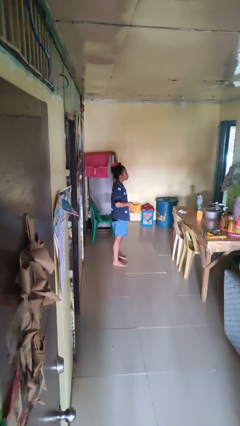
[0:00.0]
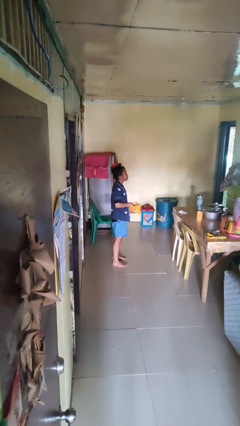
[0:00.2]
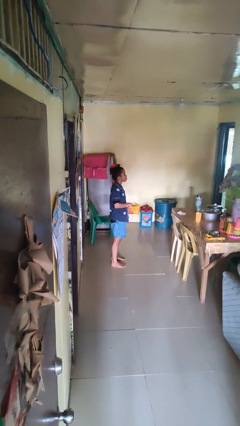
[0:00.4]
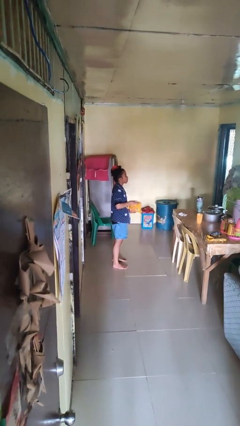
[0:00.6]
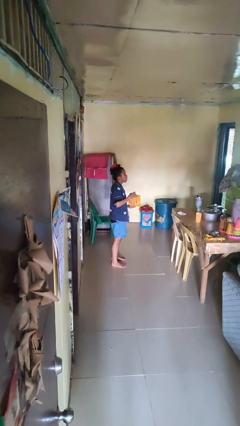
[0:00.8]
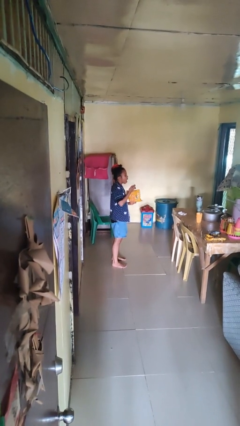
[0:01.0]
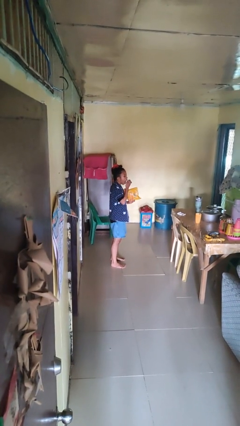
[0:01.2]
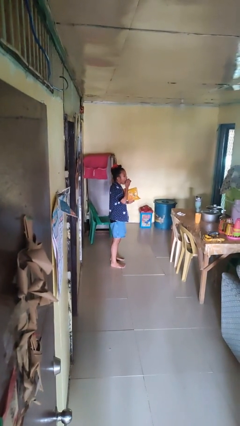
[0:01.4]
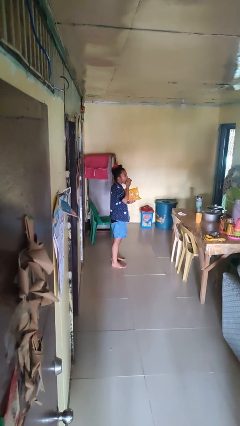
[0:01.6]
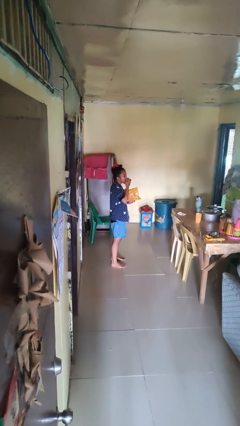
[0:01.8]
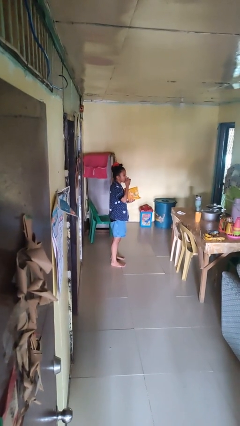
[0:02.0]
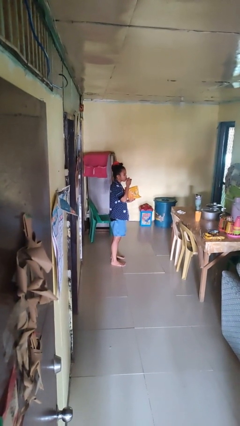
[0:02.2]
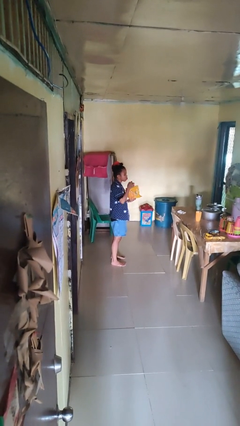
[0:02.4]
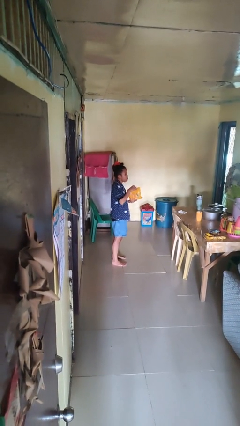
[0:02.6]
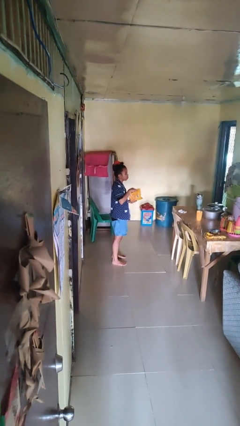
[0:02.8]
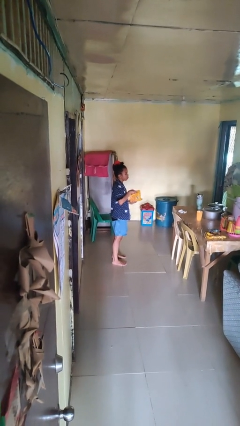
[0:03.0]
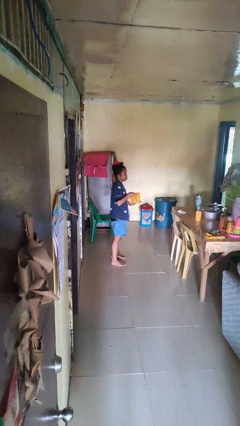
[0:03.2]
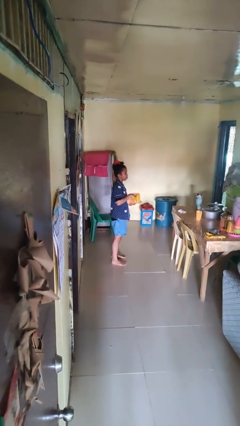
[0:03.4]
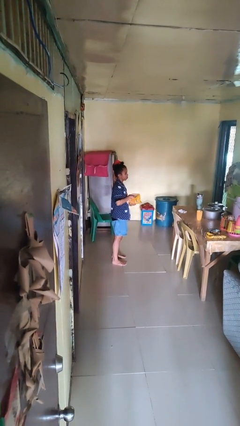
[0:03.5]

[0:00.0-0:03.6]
person eats snack from bag

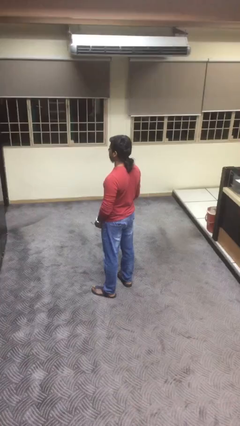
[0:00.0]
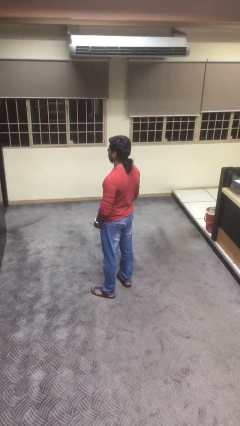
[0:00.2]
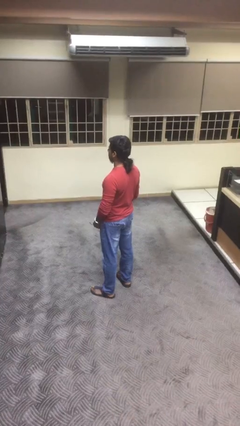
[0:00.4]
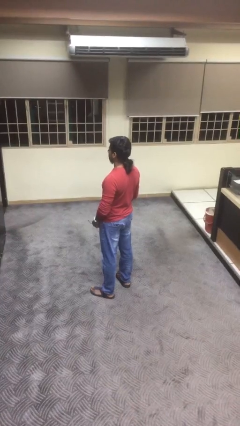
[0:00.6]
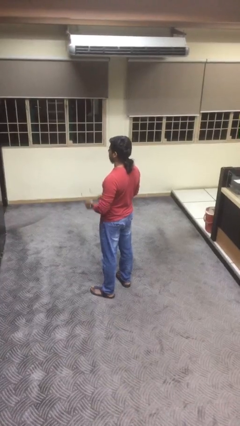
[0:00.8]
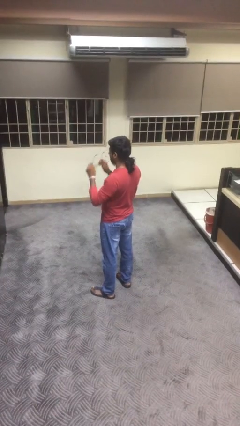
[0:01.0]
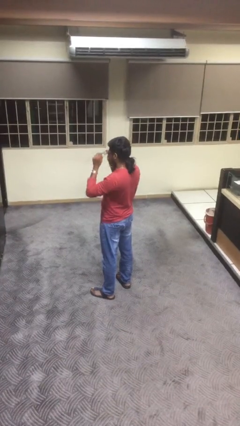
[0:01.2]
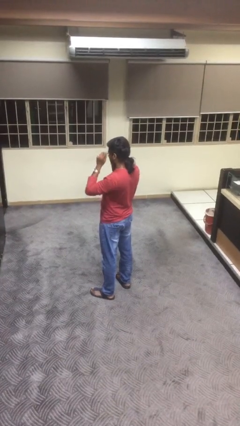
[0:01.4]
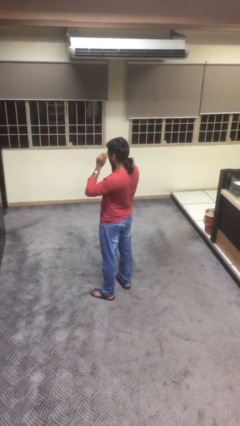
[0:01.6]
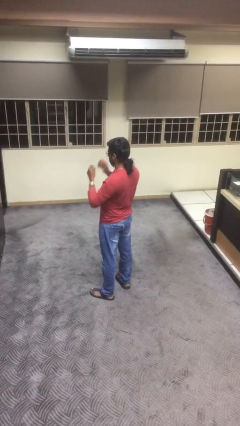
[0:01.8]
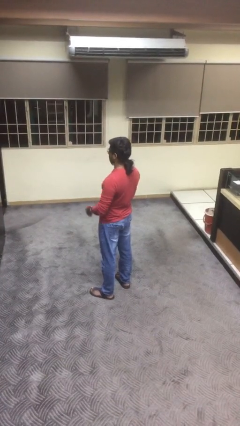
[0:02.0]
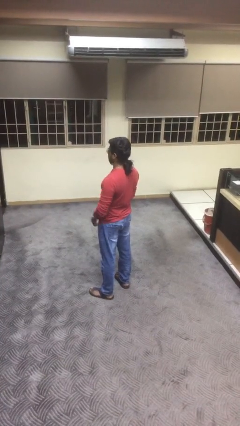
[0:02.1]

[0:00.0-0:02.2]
person puts on glasses

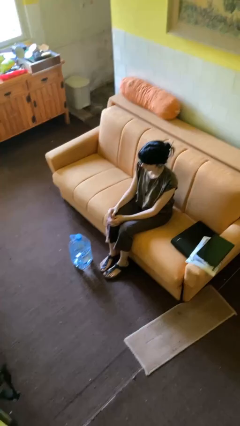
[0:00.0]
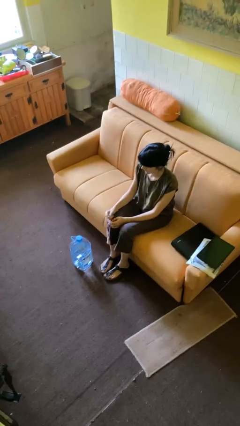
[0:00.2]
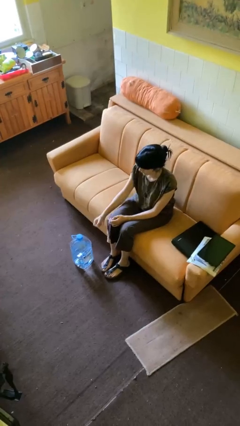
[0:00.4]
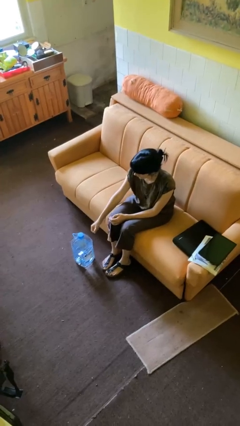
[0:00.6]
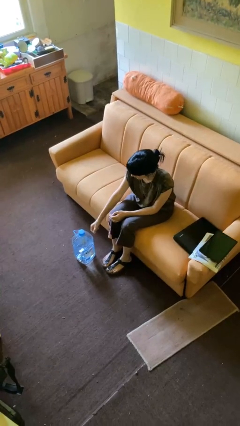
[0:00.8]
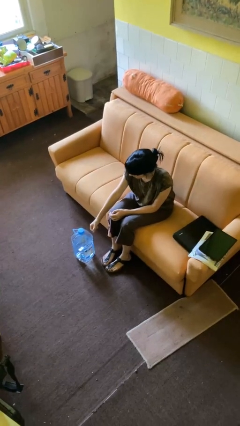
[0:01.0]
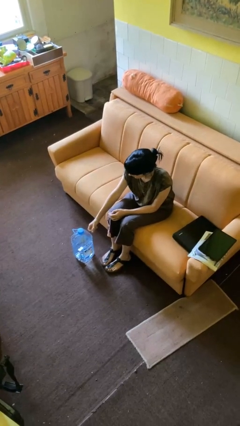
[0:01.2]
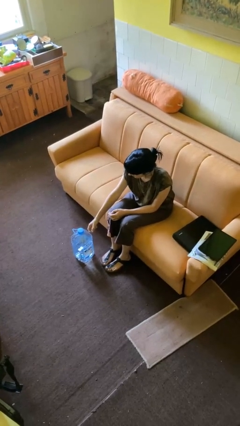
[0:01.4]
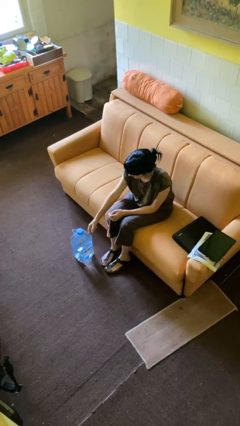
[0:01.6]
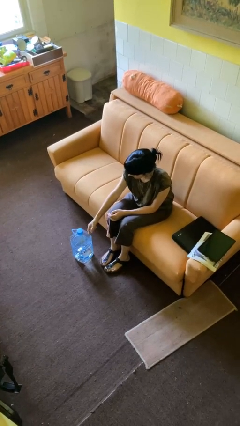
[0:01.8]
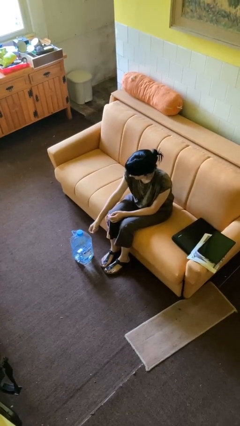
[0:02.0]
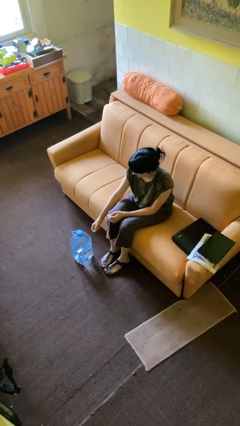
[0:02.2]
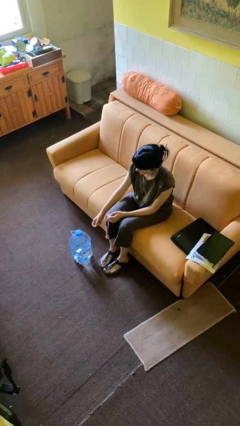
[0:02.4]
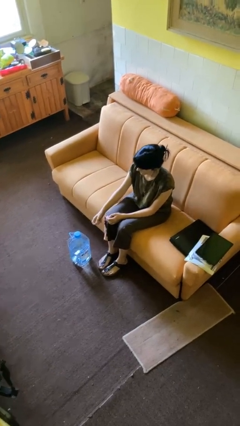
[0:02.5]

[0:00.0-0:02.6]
person taps object with finger

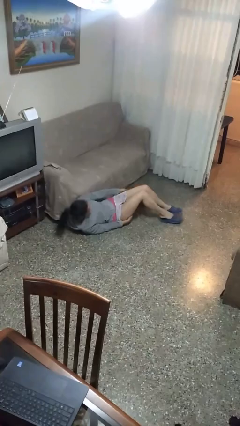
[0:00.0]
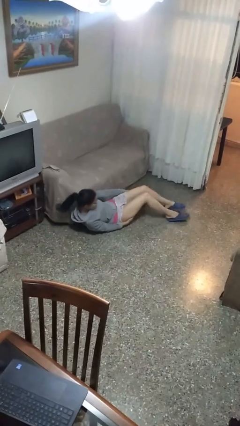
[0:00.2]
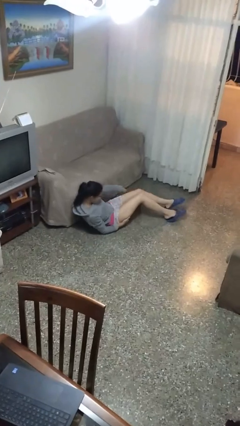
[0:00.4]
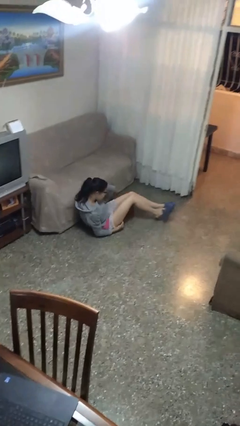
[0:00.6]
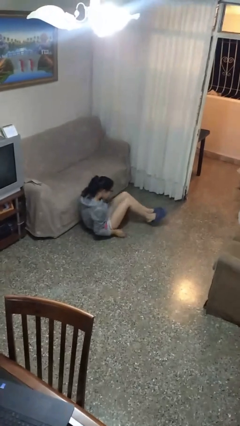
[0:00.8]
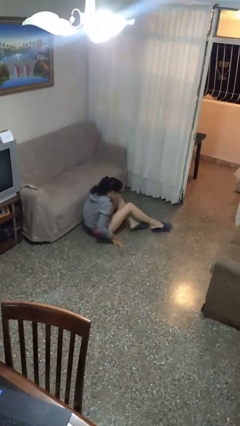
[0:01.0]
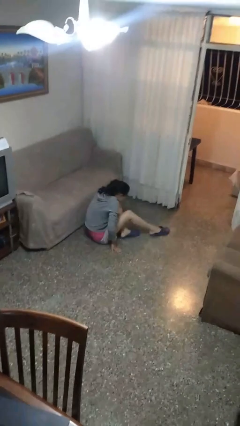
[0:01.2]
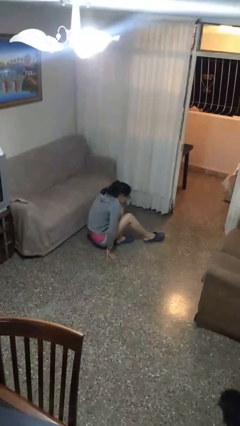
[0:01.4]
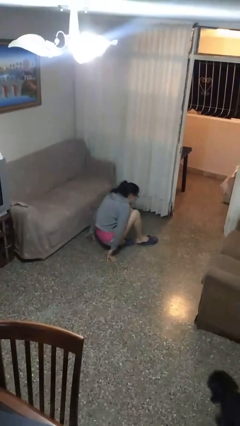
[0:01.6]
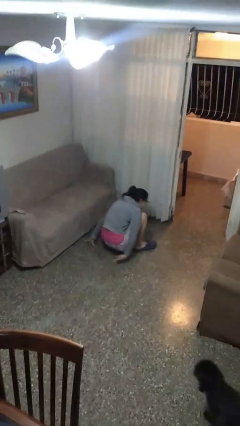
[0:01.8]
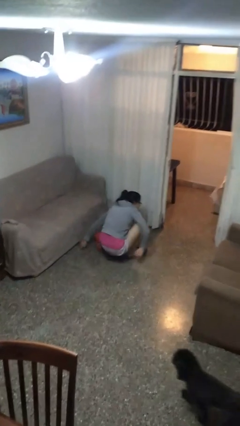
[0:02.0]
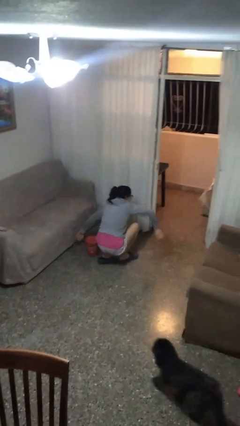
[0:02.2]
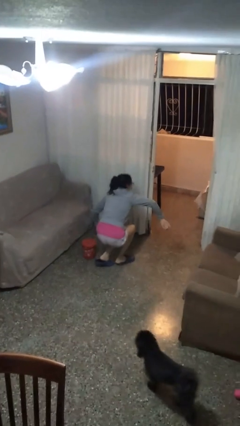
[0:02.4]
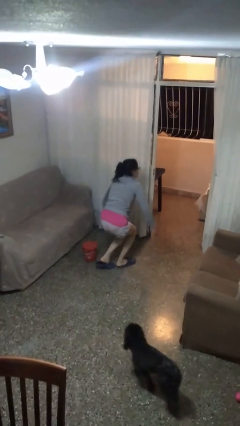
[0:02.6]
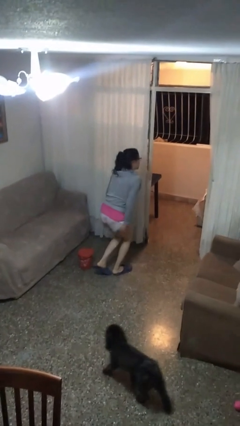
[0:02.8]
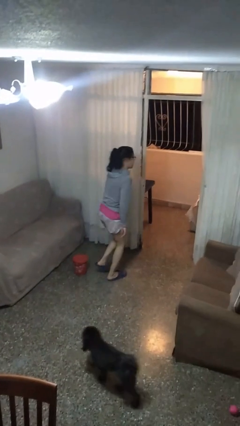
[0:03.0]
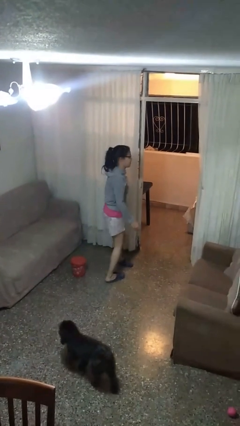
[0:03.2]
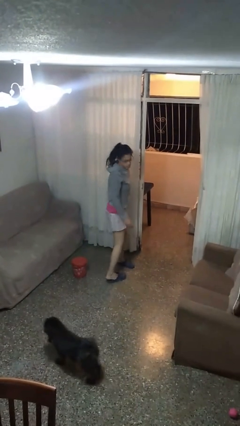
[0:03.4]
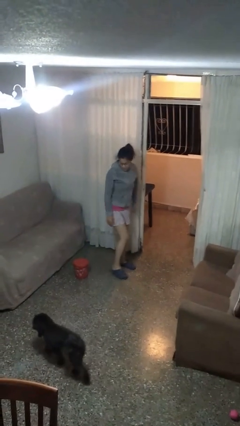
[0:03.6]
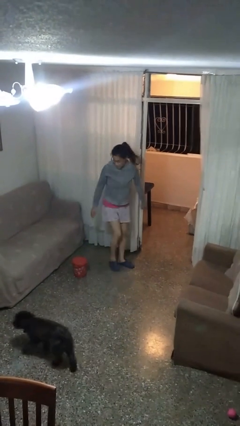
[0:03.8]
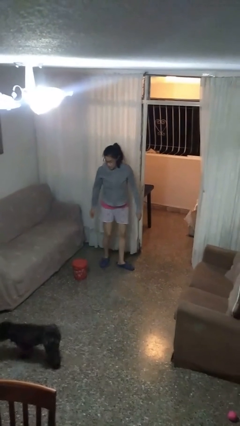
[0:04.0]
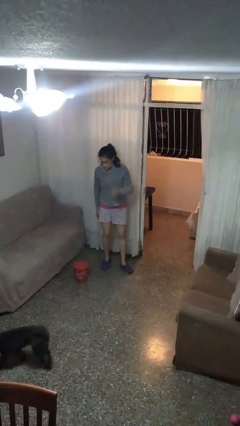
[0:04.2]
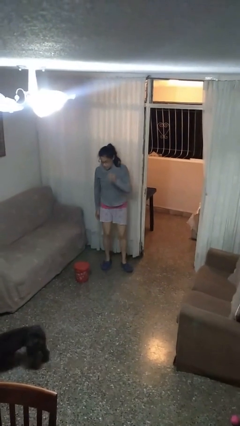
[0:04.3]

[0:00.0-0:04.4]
person stands up from floor

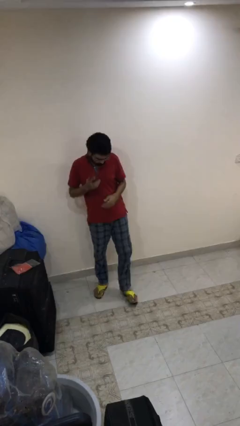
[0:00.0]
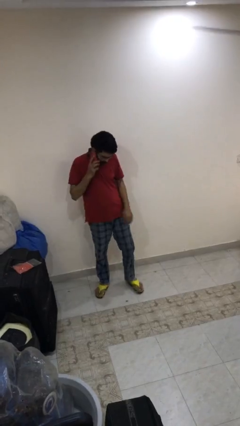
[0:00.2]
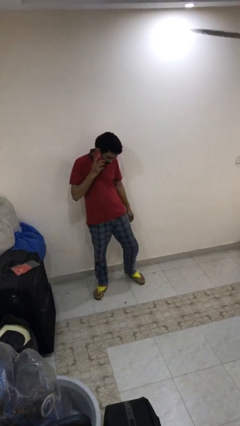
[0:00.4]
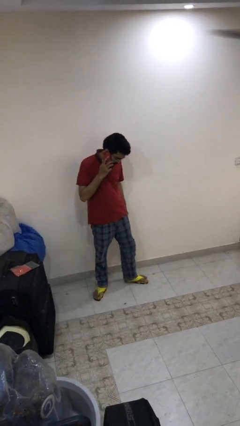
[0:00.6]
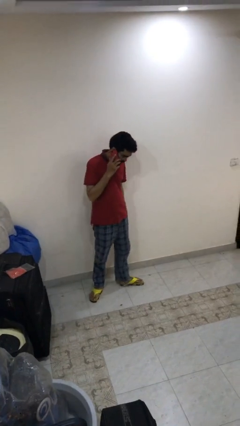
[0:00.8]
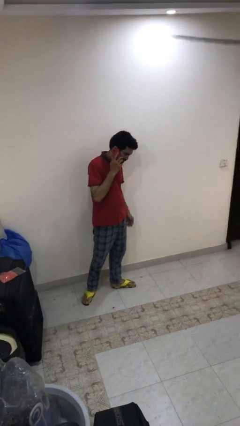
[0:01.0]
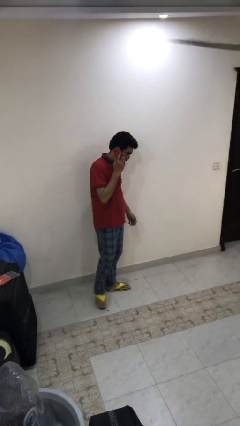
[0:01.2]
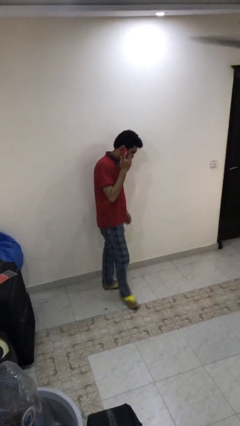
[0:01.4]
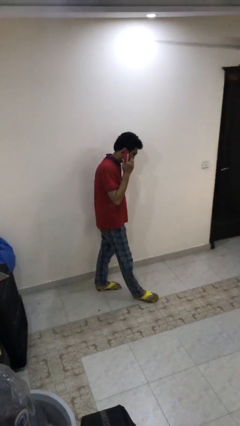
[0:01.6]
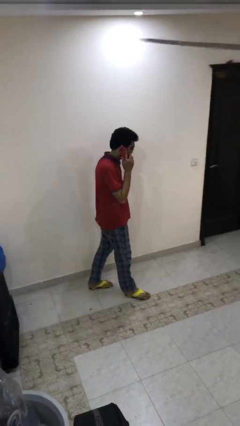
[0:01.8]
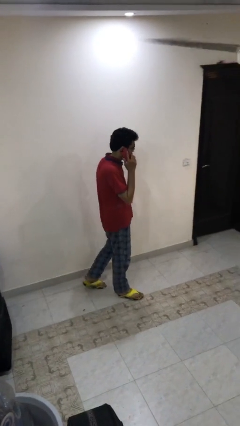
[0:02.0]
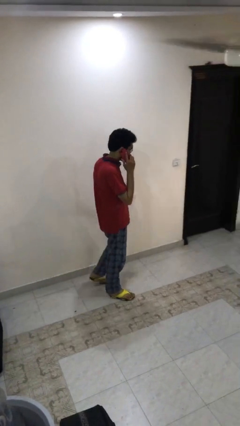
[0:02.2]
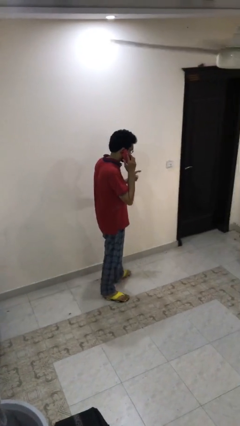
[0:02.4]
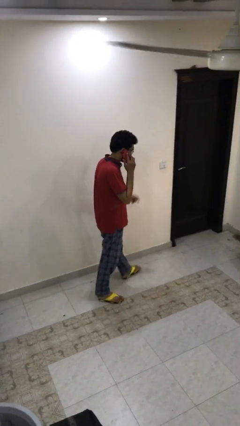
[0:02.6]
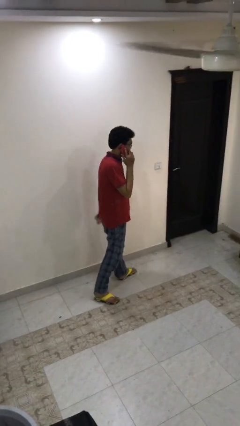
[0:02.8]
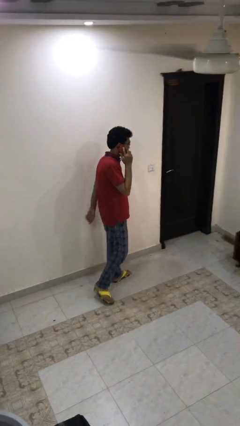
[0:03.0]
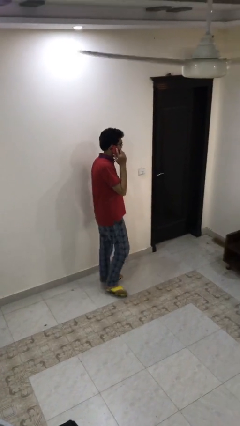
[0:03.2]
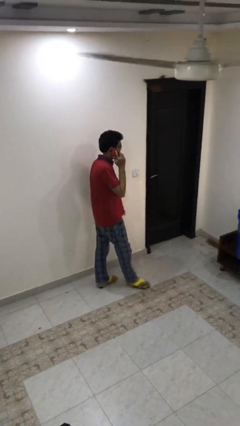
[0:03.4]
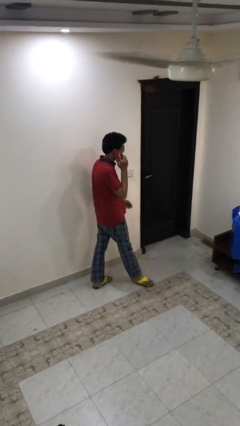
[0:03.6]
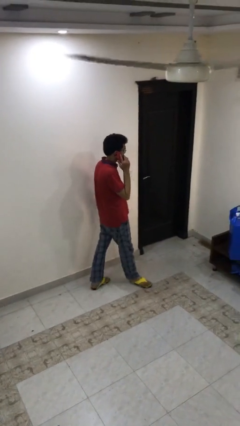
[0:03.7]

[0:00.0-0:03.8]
person talks on phone

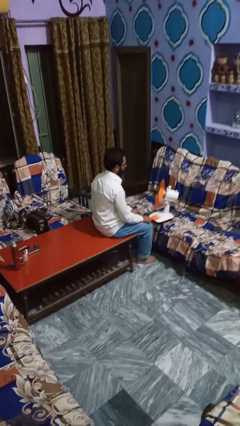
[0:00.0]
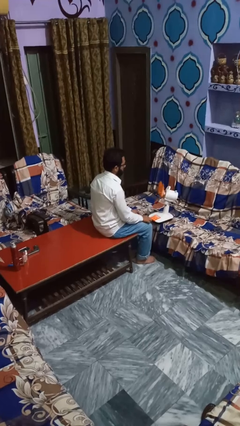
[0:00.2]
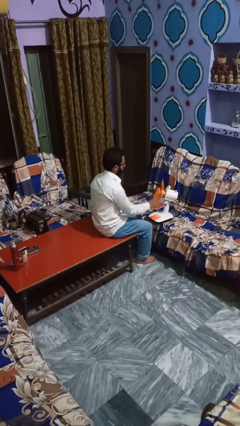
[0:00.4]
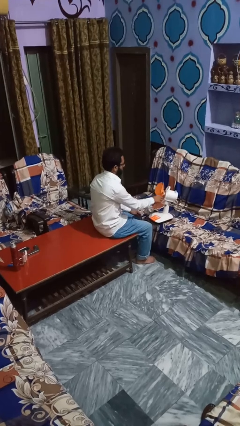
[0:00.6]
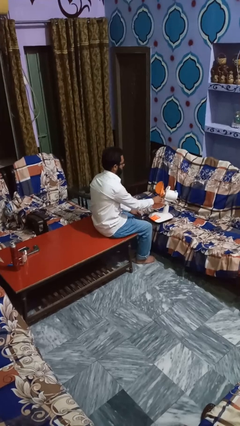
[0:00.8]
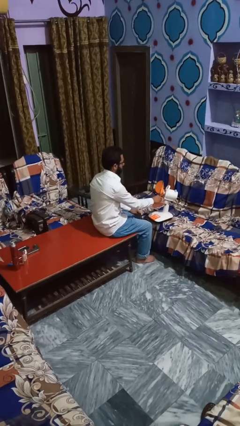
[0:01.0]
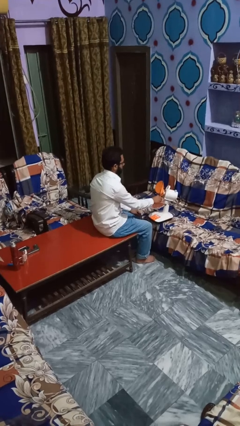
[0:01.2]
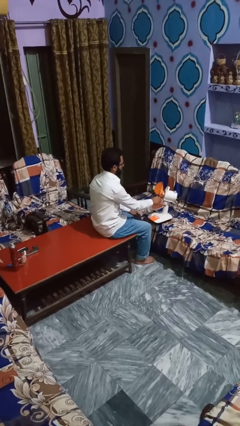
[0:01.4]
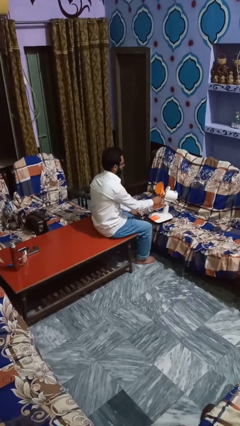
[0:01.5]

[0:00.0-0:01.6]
person turns off fan
